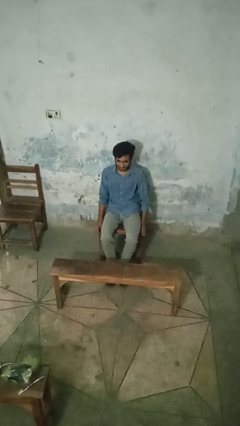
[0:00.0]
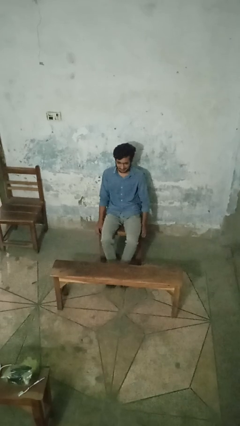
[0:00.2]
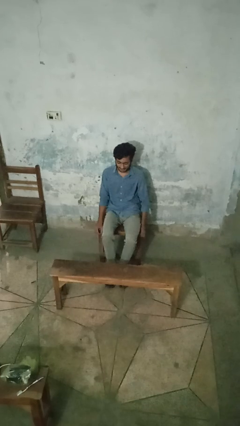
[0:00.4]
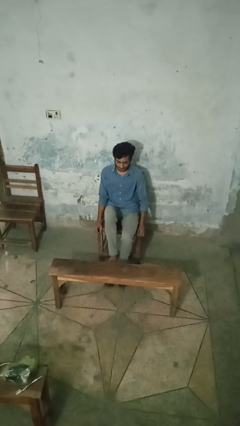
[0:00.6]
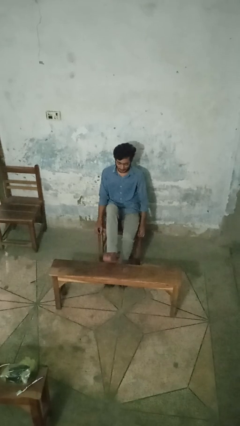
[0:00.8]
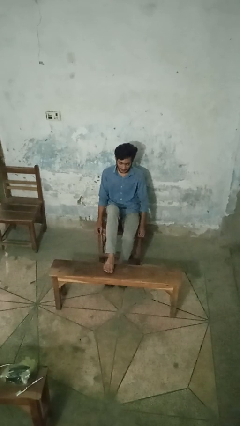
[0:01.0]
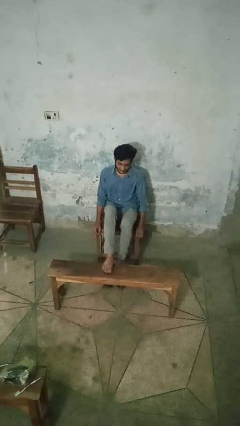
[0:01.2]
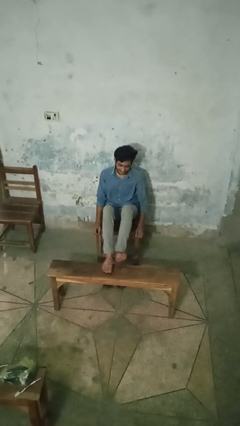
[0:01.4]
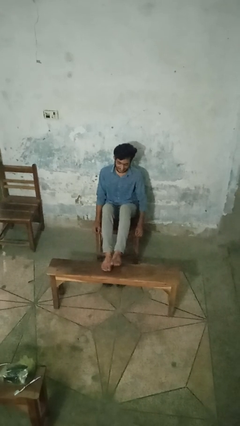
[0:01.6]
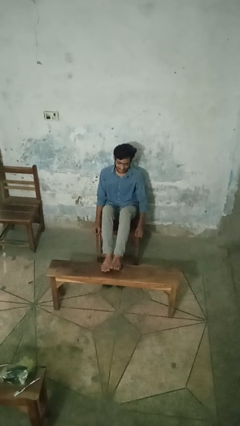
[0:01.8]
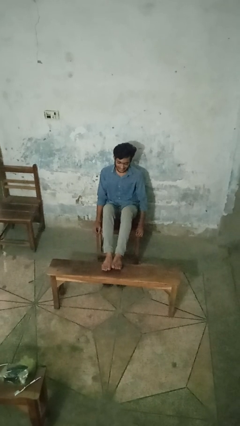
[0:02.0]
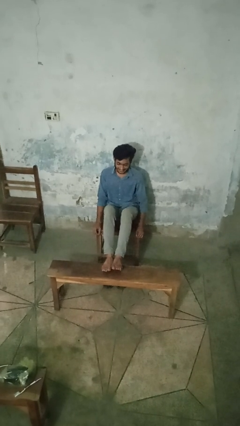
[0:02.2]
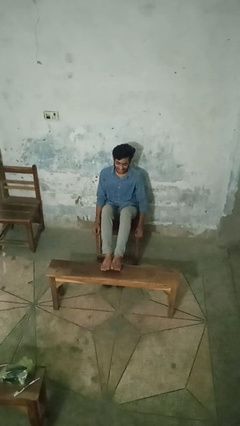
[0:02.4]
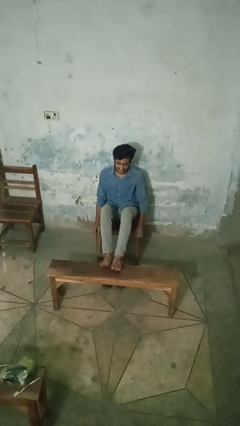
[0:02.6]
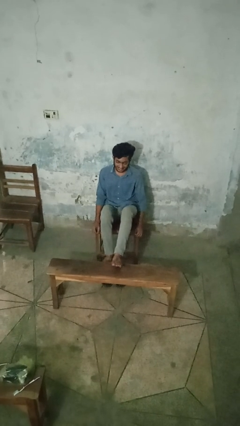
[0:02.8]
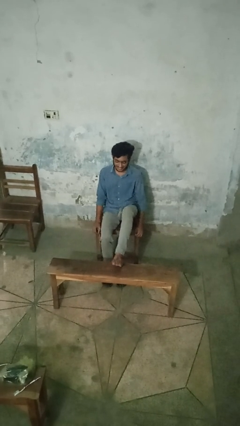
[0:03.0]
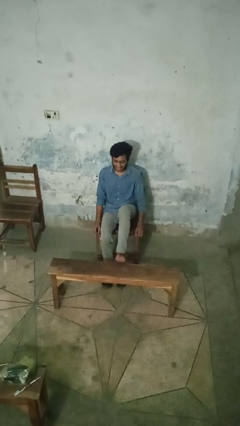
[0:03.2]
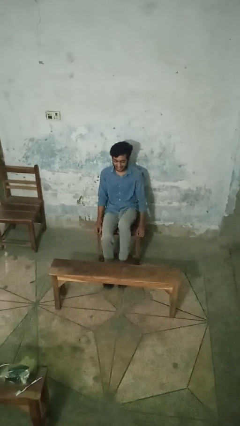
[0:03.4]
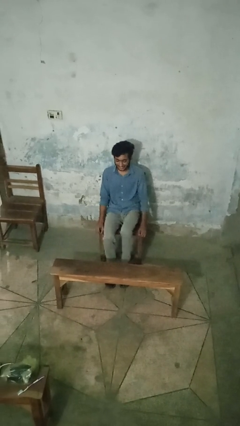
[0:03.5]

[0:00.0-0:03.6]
person puts feet up

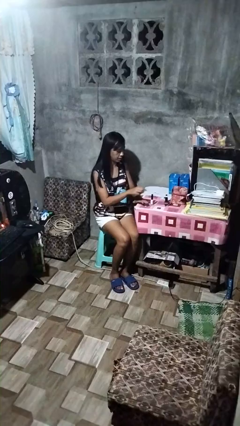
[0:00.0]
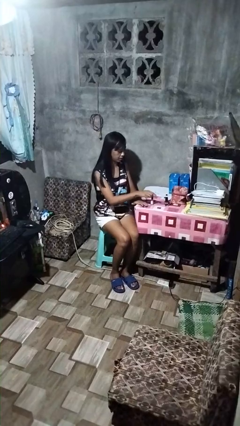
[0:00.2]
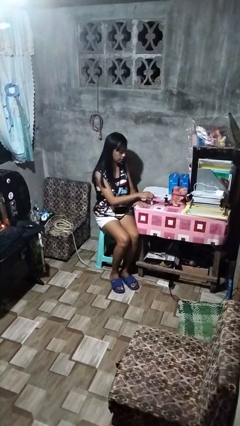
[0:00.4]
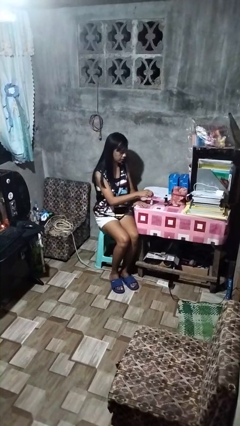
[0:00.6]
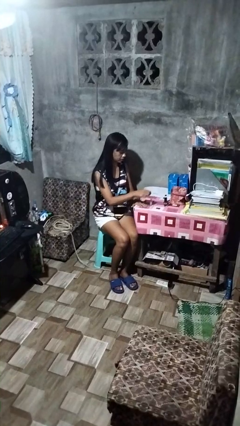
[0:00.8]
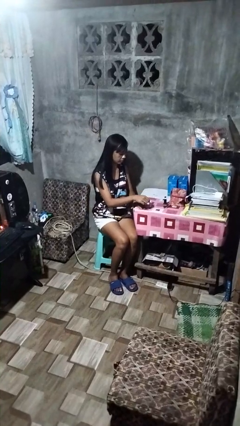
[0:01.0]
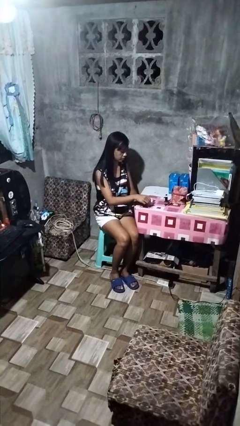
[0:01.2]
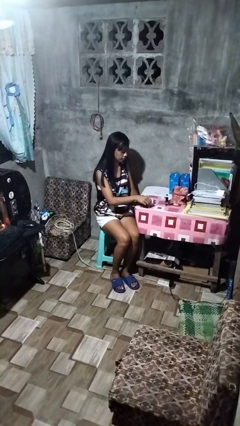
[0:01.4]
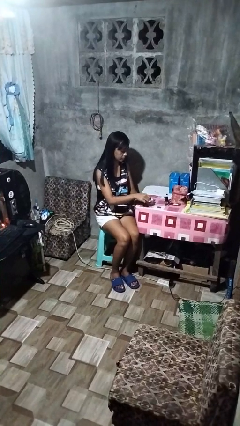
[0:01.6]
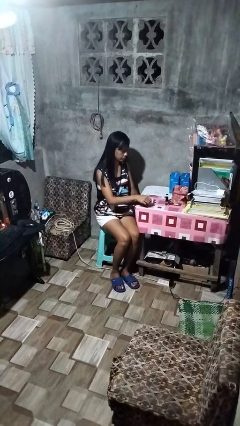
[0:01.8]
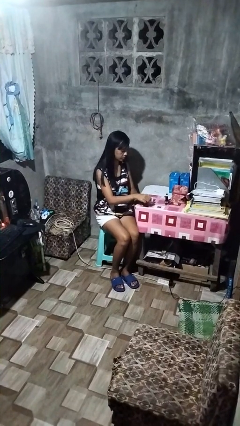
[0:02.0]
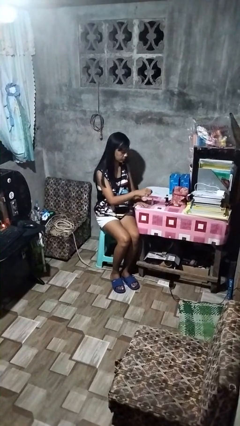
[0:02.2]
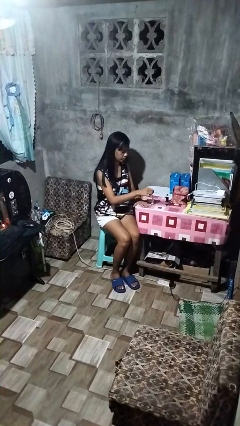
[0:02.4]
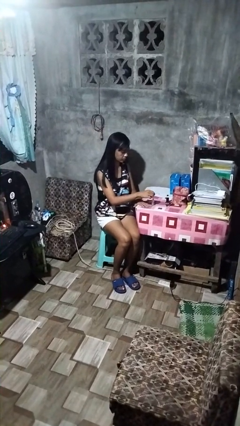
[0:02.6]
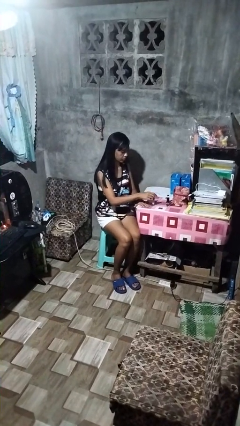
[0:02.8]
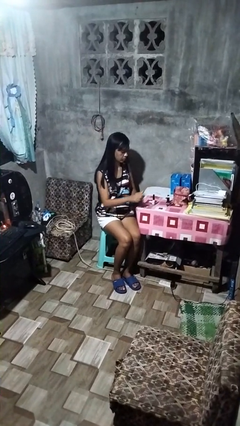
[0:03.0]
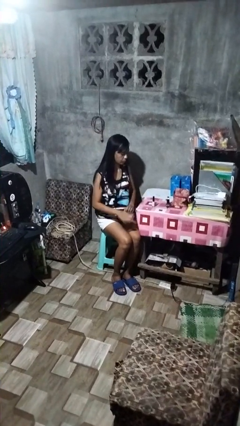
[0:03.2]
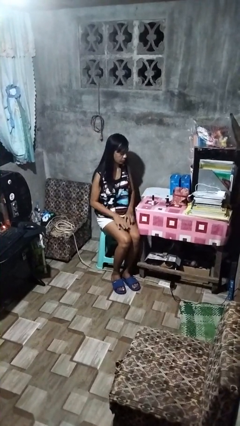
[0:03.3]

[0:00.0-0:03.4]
person paints fingernails

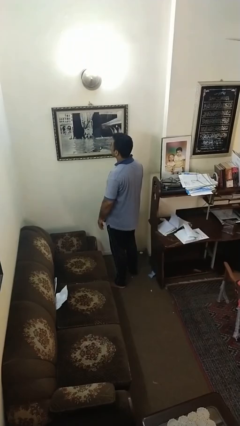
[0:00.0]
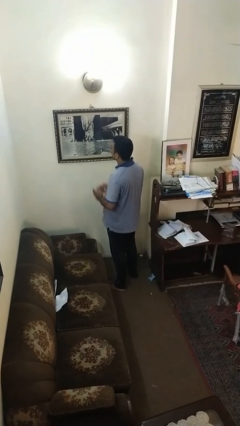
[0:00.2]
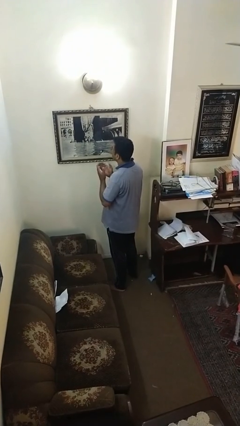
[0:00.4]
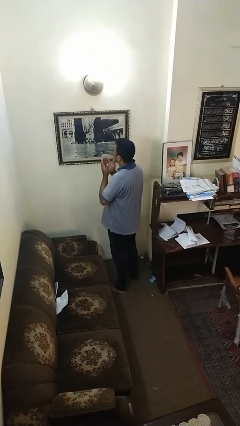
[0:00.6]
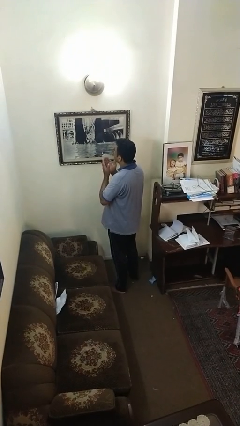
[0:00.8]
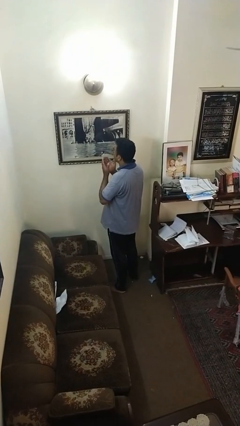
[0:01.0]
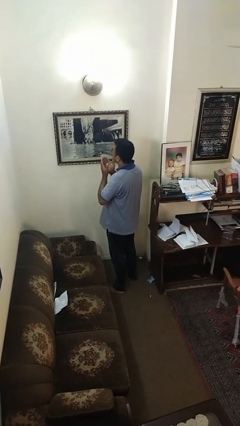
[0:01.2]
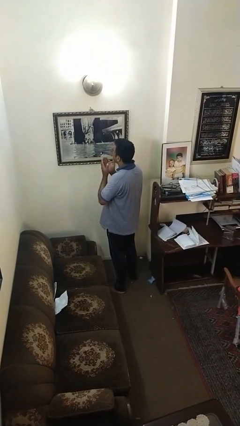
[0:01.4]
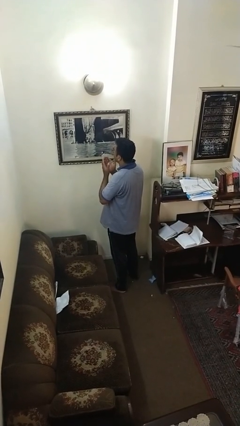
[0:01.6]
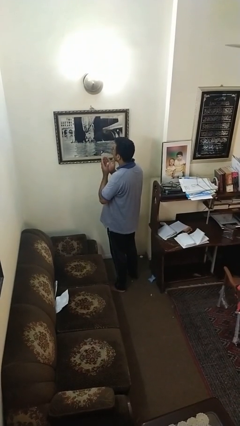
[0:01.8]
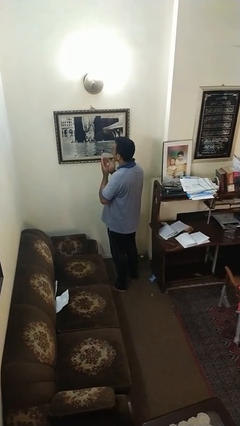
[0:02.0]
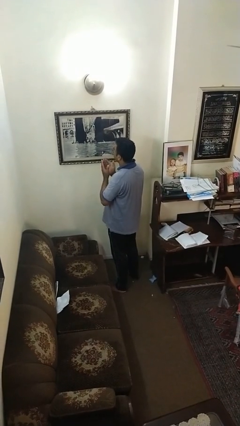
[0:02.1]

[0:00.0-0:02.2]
person prays

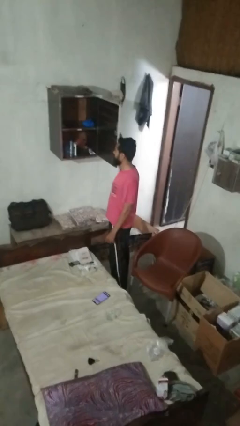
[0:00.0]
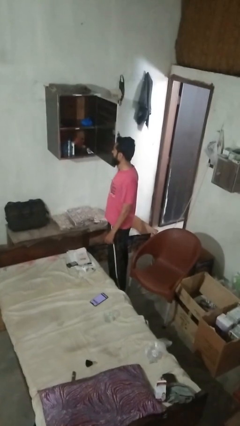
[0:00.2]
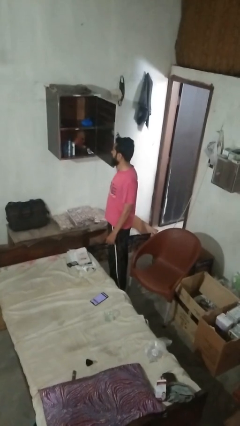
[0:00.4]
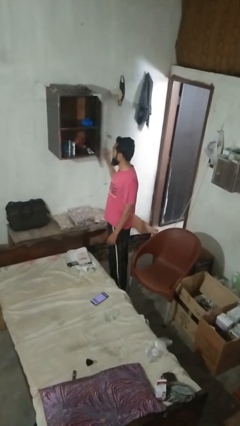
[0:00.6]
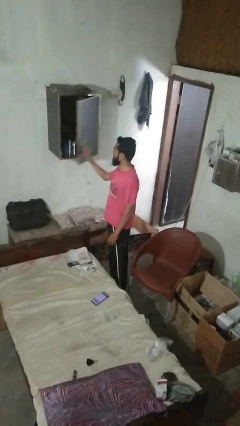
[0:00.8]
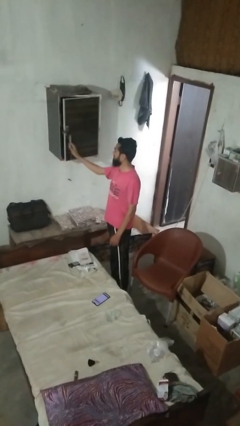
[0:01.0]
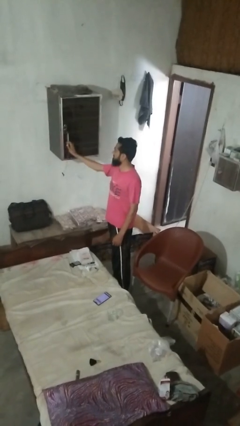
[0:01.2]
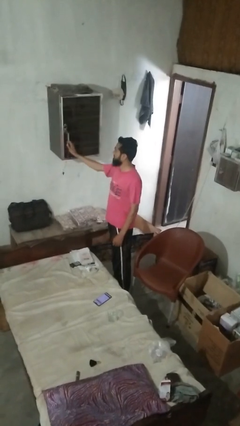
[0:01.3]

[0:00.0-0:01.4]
person closes dresser drawer

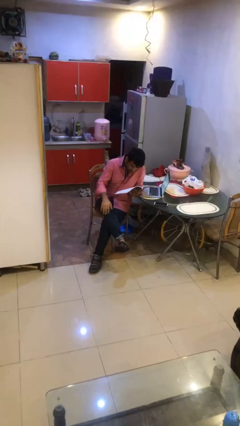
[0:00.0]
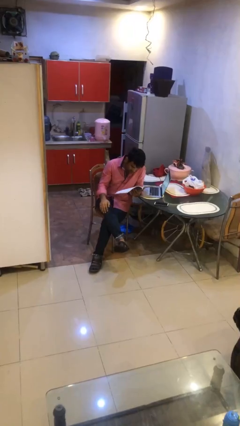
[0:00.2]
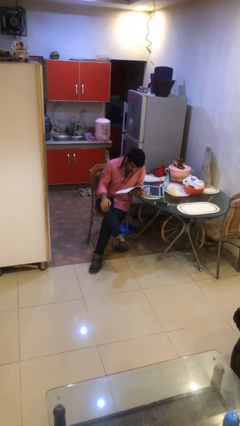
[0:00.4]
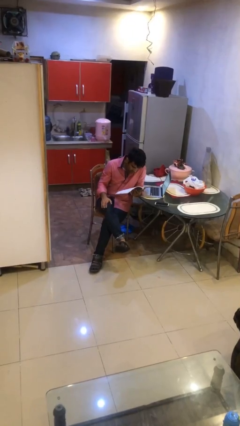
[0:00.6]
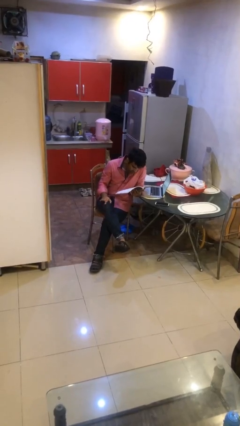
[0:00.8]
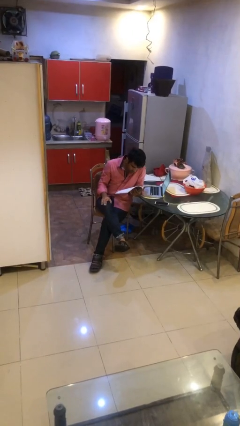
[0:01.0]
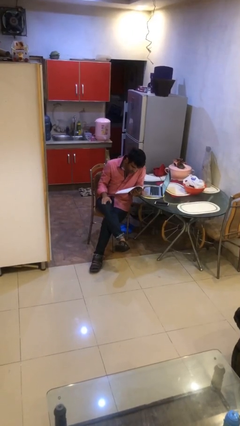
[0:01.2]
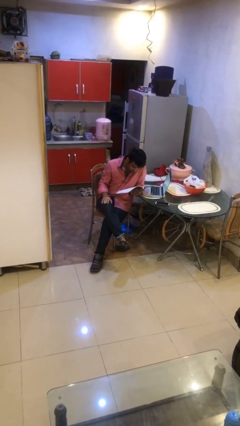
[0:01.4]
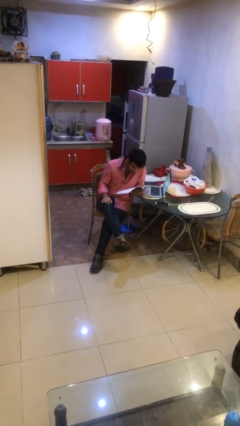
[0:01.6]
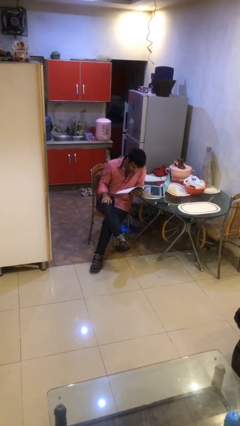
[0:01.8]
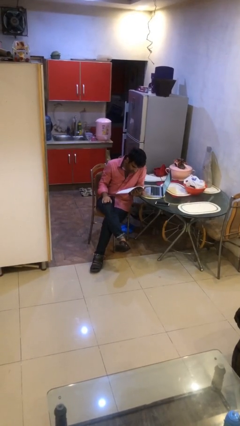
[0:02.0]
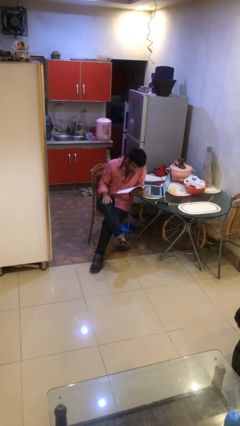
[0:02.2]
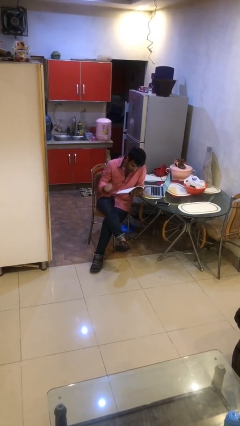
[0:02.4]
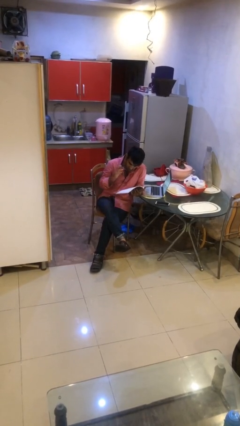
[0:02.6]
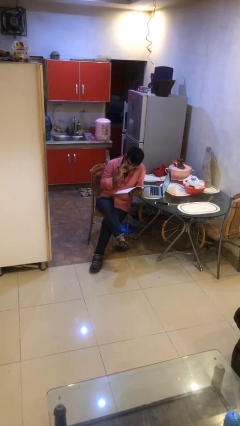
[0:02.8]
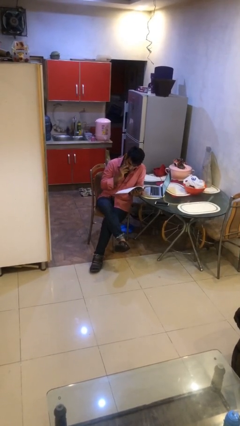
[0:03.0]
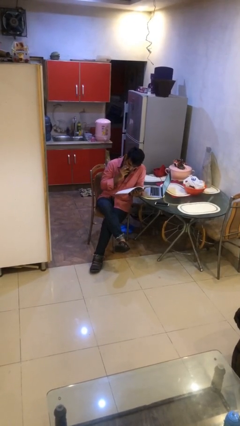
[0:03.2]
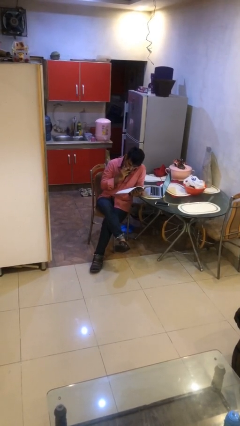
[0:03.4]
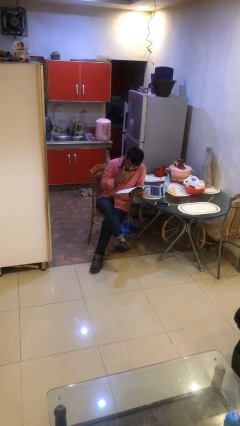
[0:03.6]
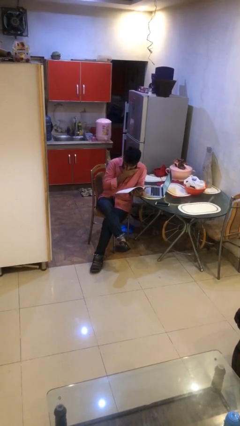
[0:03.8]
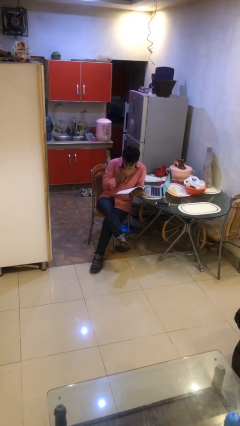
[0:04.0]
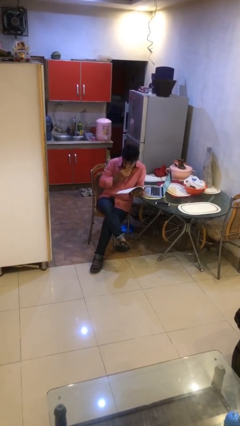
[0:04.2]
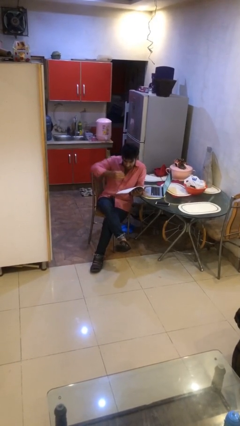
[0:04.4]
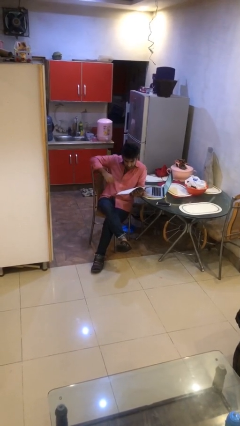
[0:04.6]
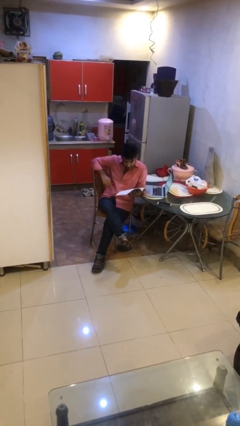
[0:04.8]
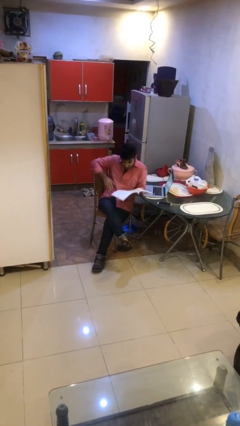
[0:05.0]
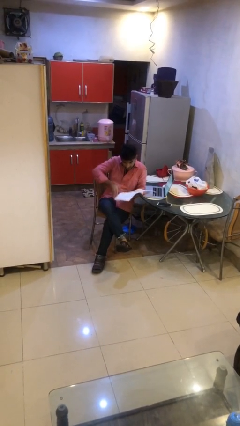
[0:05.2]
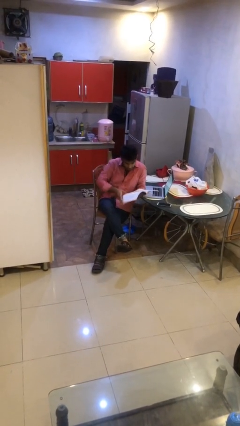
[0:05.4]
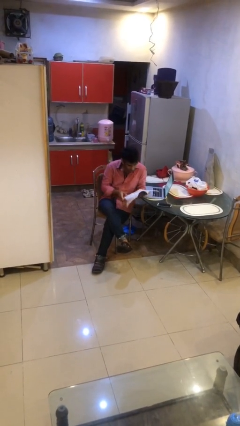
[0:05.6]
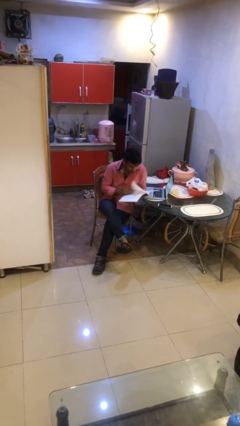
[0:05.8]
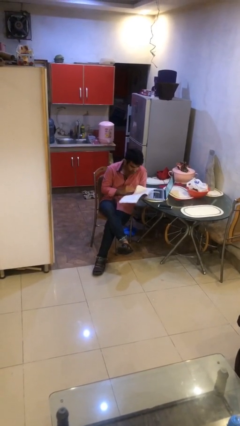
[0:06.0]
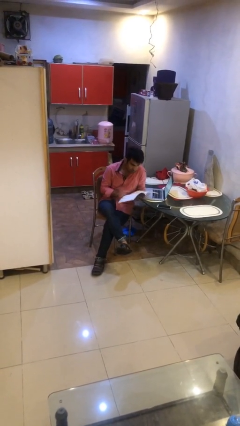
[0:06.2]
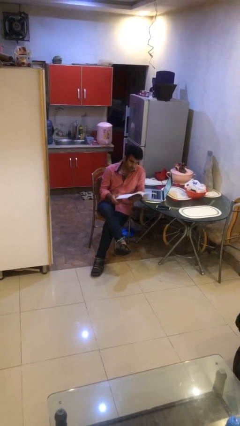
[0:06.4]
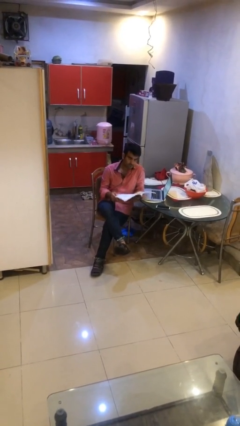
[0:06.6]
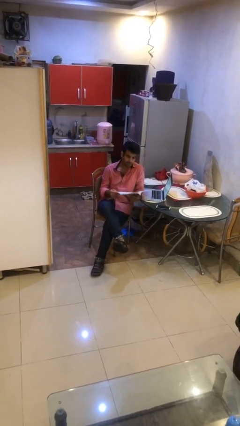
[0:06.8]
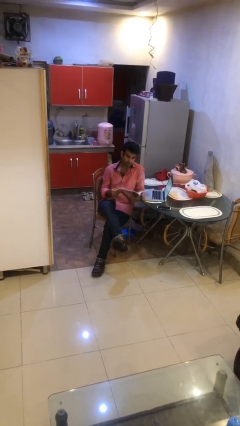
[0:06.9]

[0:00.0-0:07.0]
person reads document

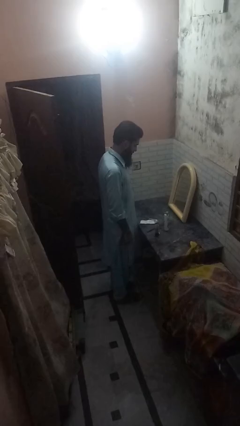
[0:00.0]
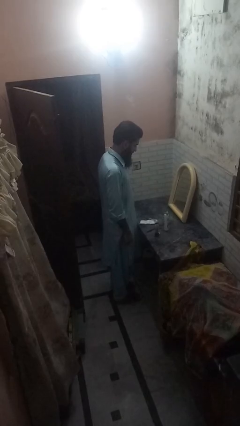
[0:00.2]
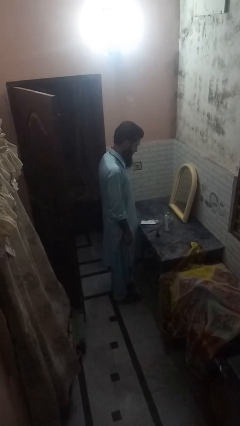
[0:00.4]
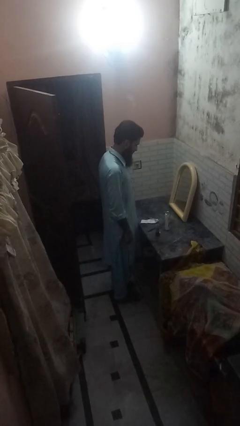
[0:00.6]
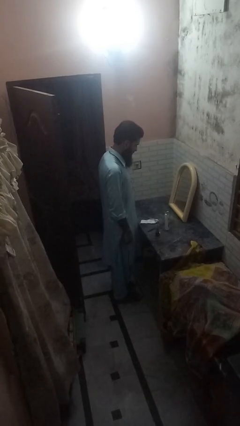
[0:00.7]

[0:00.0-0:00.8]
person shaves face
